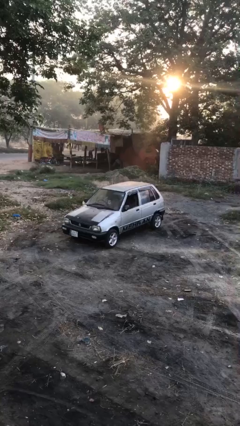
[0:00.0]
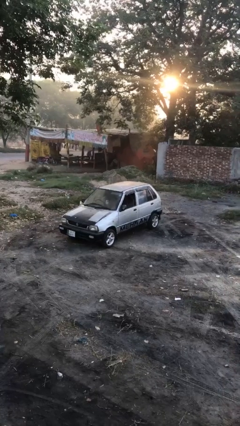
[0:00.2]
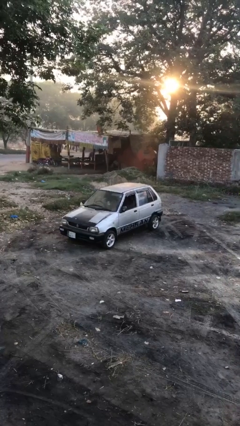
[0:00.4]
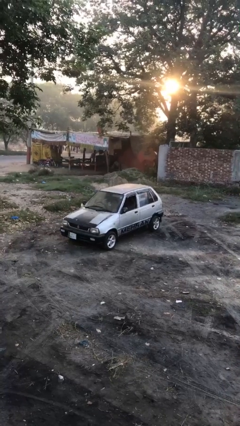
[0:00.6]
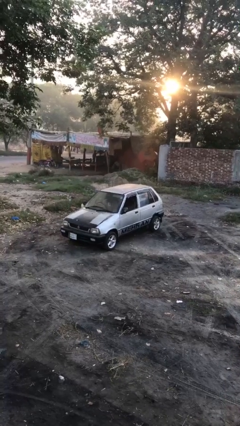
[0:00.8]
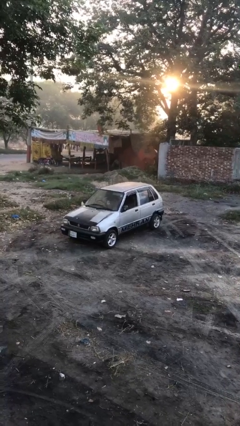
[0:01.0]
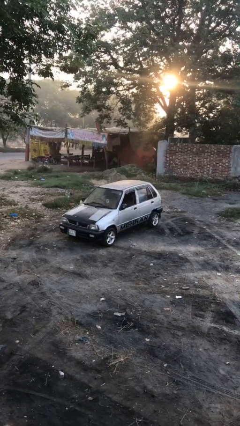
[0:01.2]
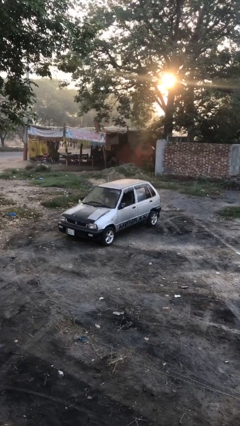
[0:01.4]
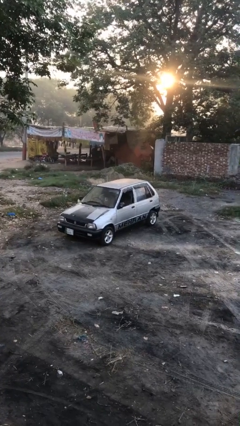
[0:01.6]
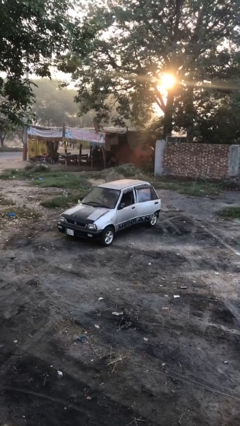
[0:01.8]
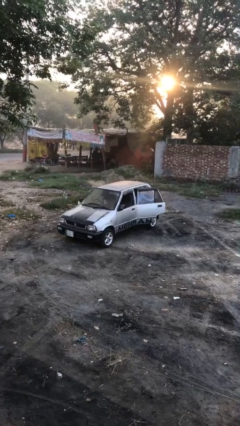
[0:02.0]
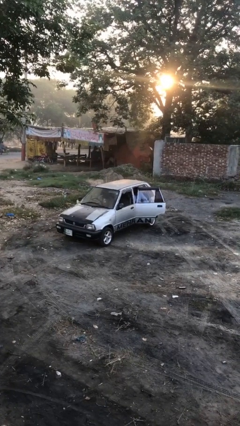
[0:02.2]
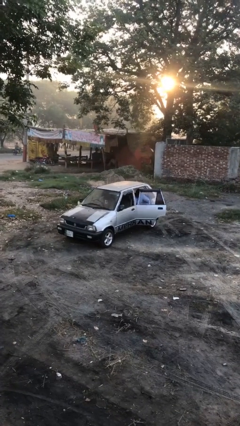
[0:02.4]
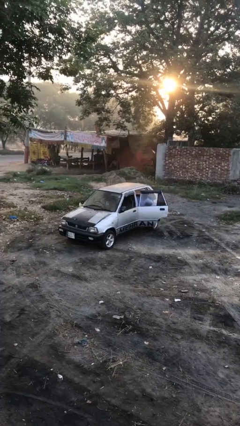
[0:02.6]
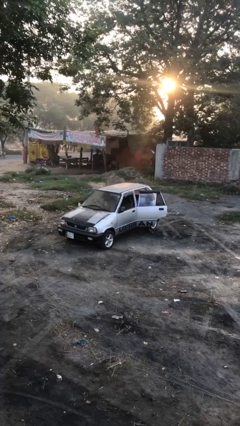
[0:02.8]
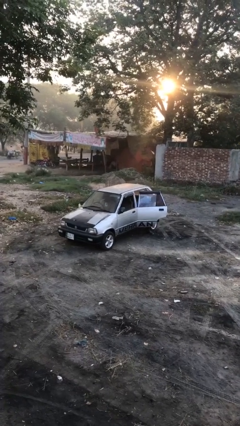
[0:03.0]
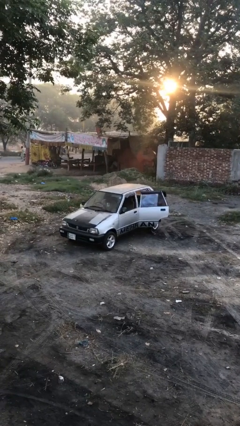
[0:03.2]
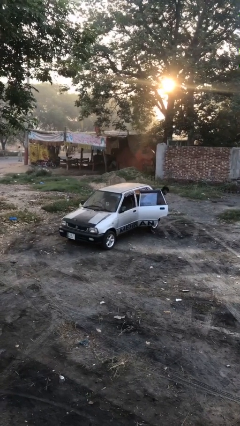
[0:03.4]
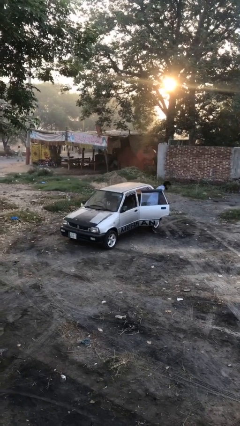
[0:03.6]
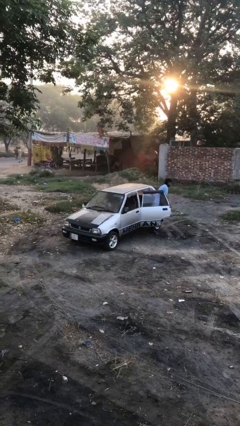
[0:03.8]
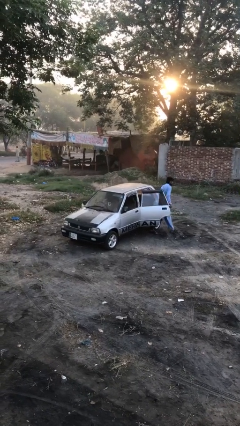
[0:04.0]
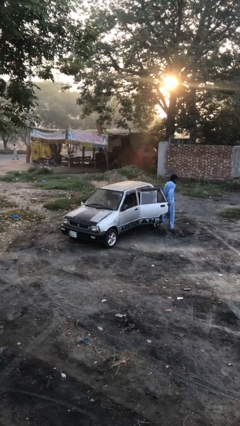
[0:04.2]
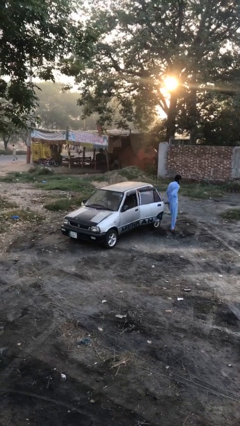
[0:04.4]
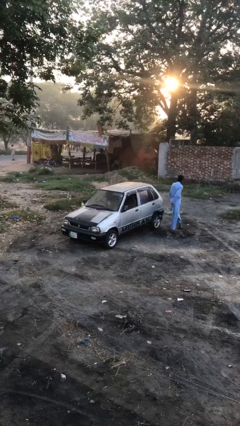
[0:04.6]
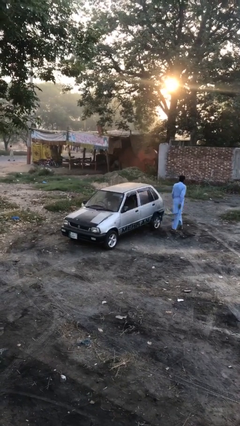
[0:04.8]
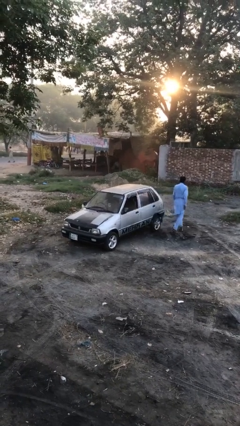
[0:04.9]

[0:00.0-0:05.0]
car drops off person

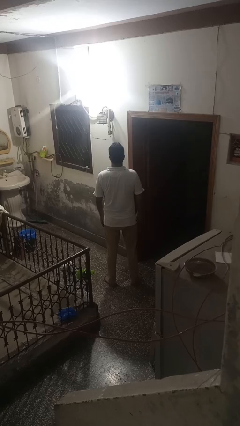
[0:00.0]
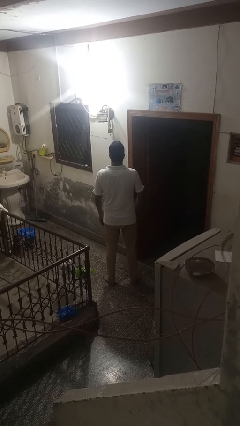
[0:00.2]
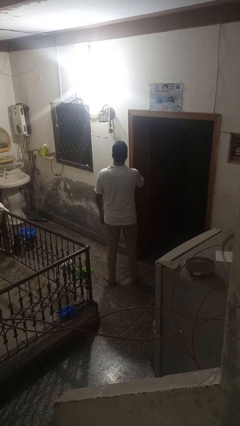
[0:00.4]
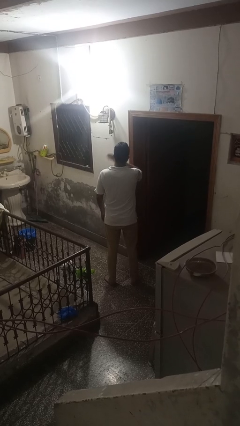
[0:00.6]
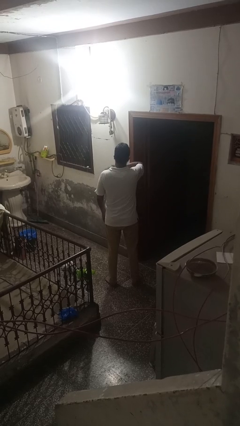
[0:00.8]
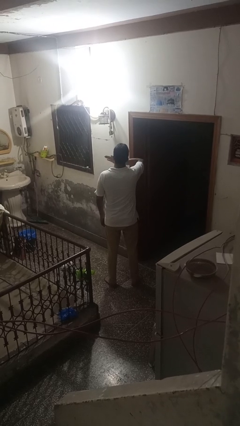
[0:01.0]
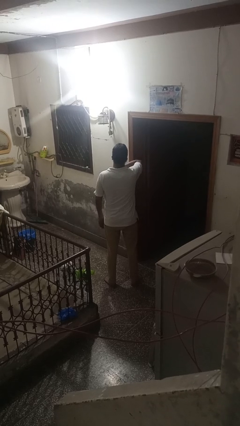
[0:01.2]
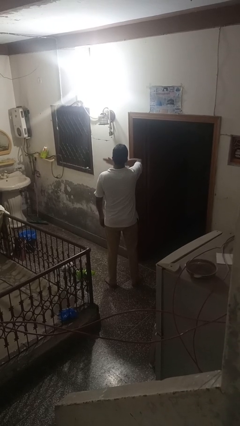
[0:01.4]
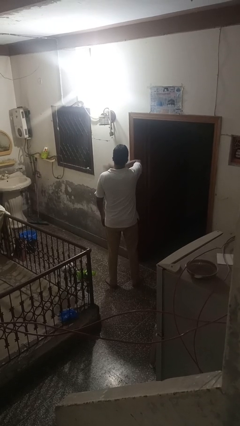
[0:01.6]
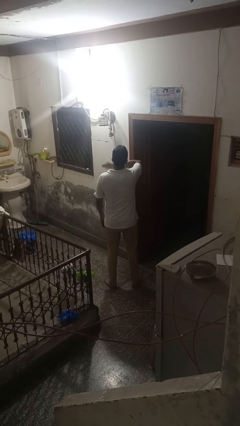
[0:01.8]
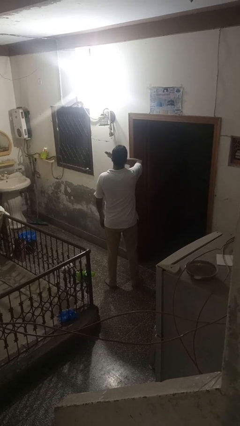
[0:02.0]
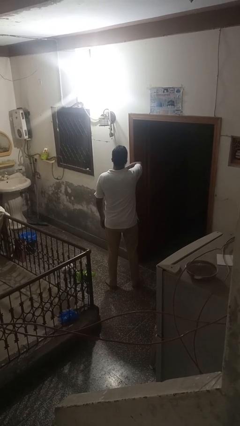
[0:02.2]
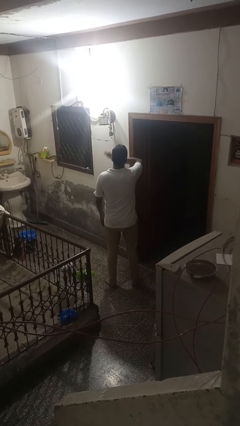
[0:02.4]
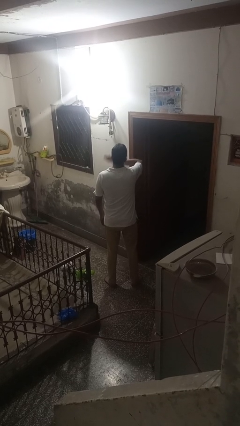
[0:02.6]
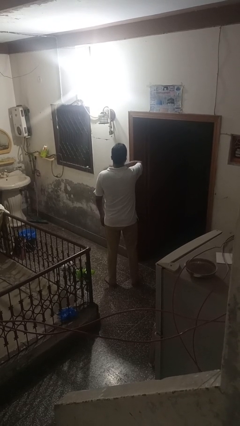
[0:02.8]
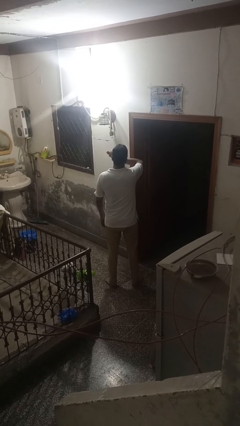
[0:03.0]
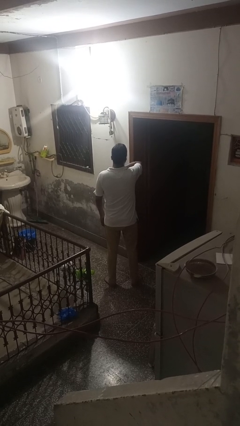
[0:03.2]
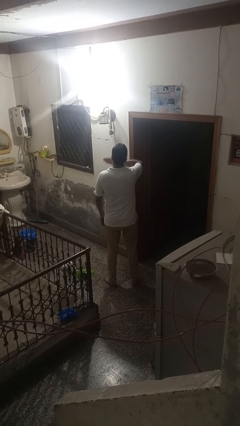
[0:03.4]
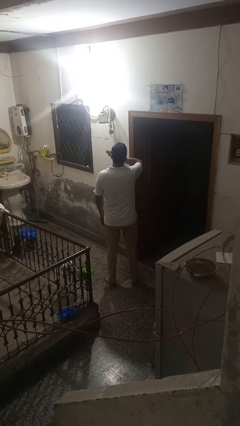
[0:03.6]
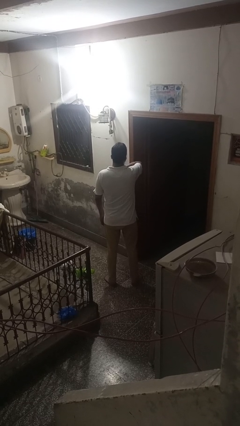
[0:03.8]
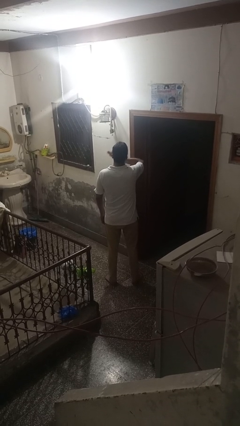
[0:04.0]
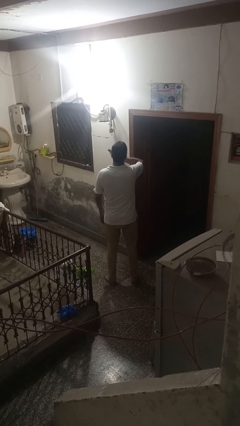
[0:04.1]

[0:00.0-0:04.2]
person drums on chest

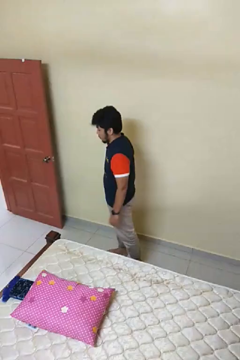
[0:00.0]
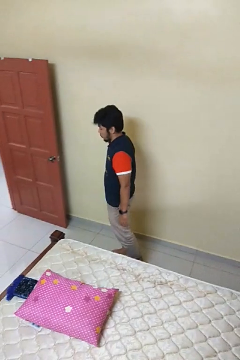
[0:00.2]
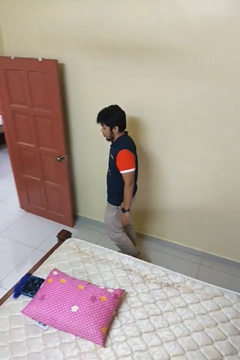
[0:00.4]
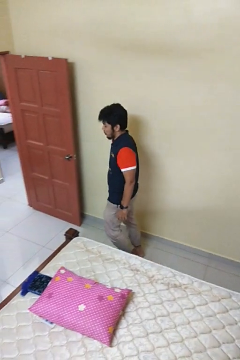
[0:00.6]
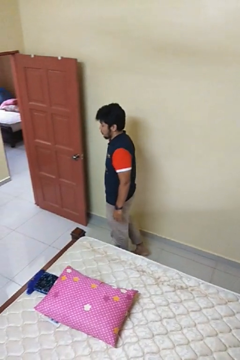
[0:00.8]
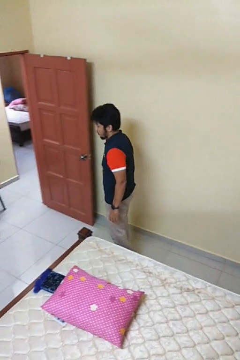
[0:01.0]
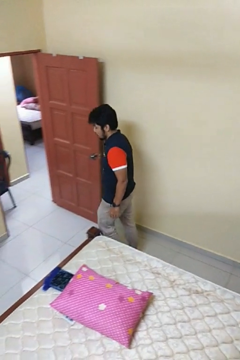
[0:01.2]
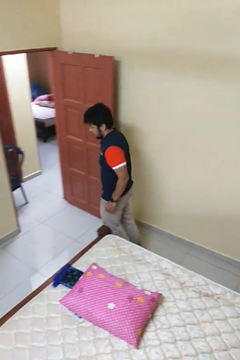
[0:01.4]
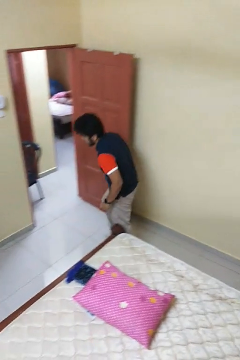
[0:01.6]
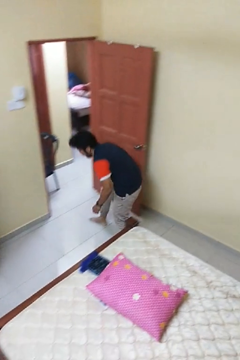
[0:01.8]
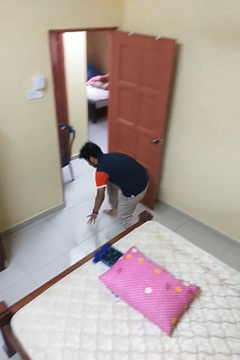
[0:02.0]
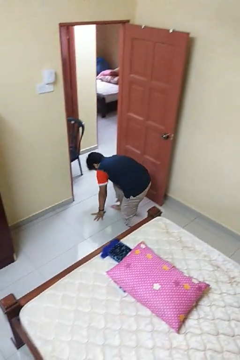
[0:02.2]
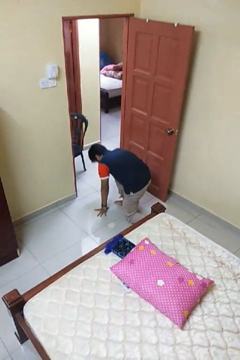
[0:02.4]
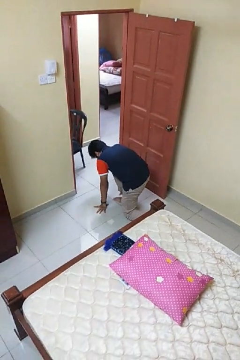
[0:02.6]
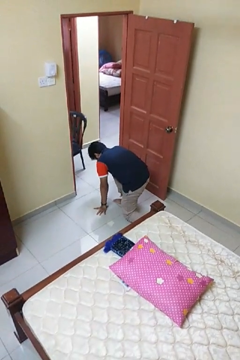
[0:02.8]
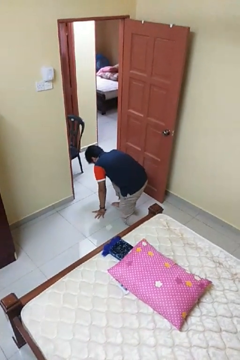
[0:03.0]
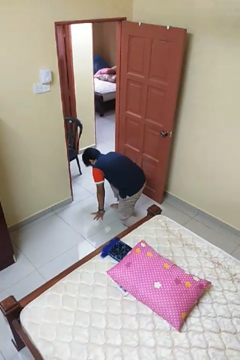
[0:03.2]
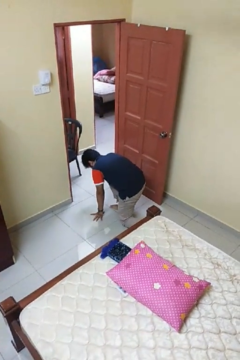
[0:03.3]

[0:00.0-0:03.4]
person trips on object on floor

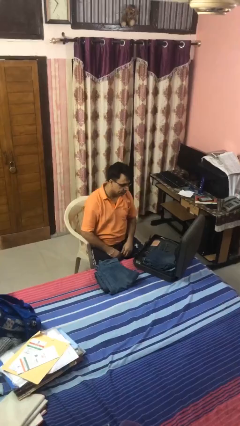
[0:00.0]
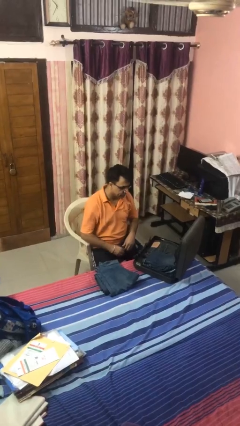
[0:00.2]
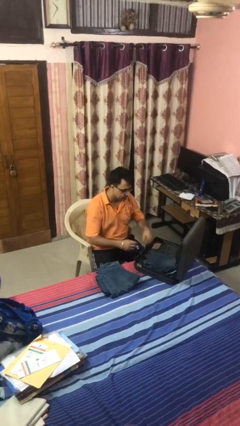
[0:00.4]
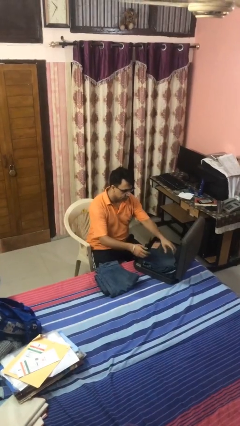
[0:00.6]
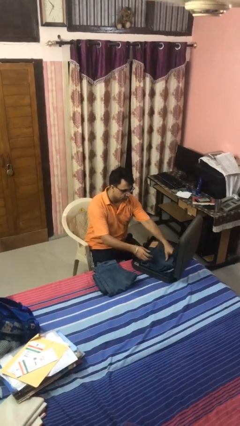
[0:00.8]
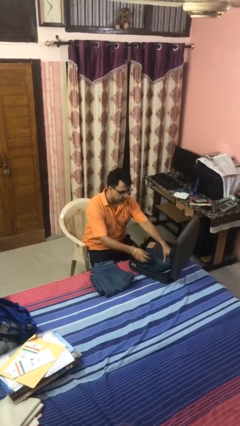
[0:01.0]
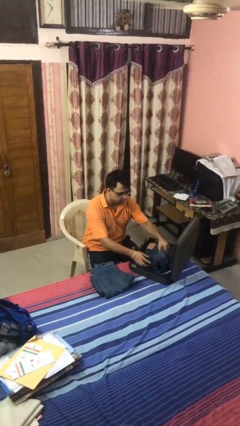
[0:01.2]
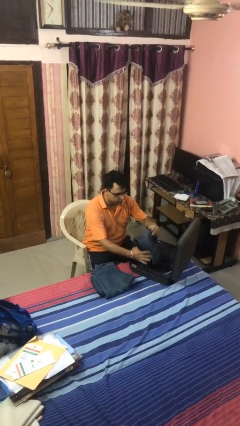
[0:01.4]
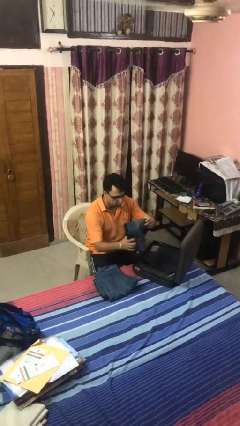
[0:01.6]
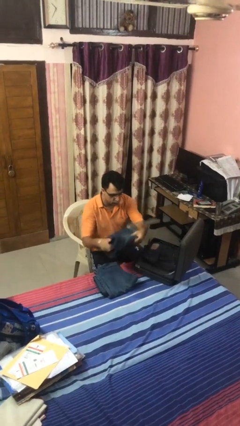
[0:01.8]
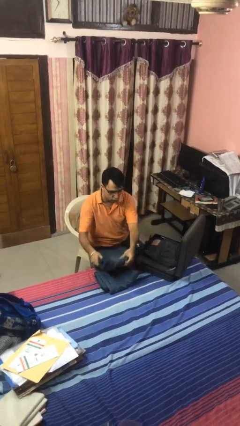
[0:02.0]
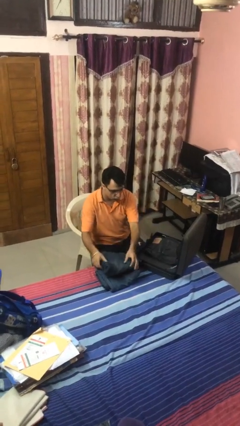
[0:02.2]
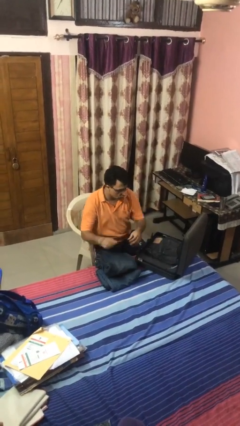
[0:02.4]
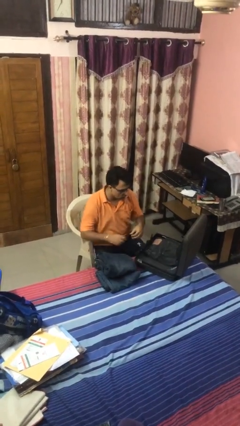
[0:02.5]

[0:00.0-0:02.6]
person unloads clothes from suitcase

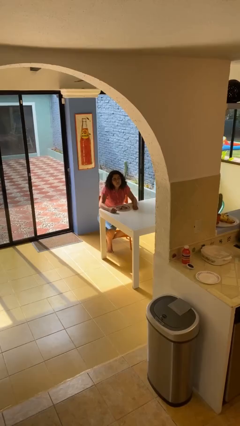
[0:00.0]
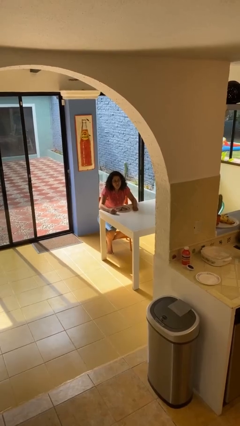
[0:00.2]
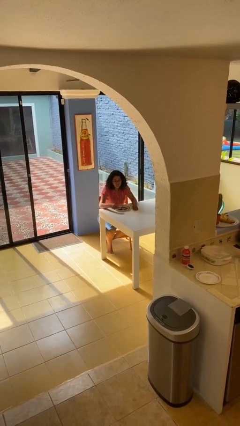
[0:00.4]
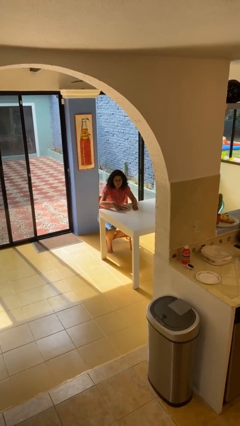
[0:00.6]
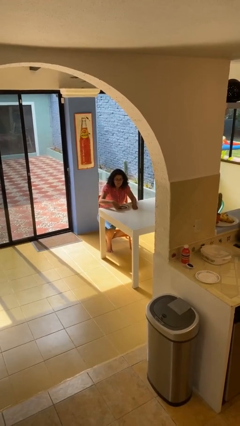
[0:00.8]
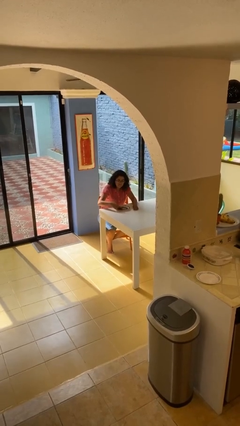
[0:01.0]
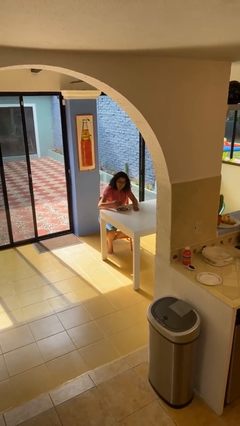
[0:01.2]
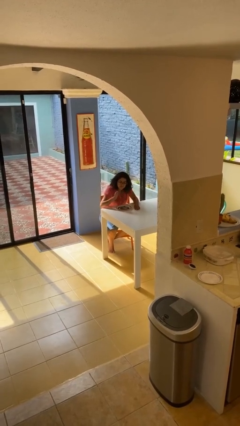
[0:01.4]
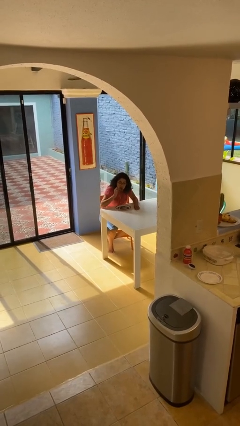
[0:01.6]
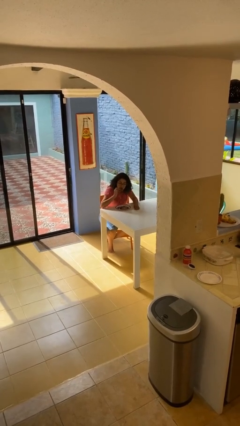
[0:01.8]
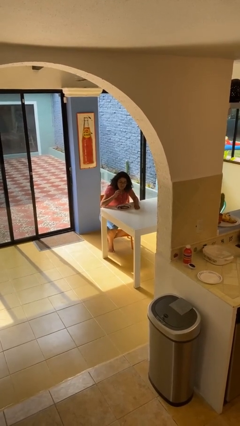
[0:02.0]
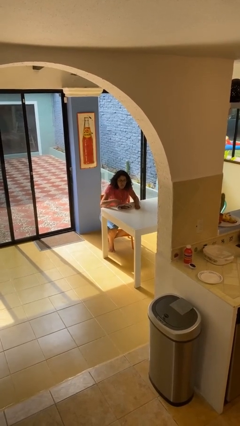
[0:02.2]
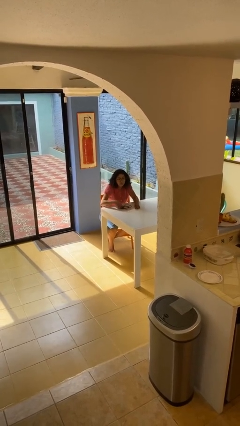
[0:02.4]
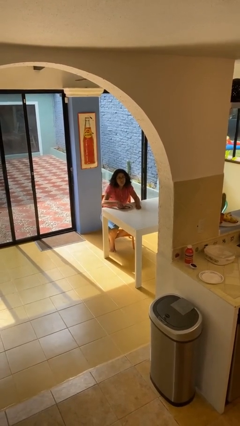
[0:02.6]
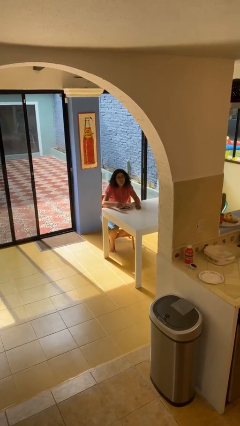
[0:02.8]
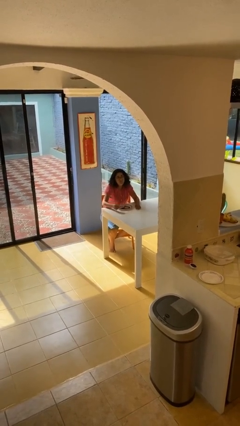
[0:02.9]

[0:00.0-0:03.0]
person eats with hands

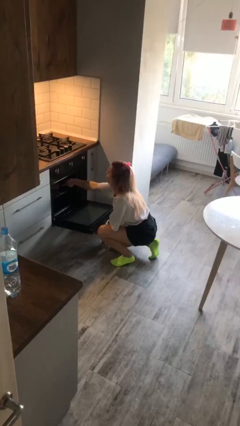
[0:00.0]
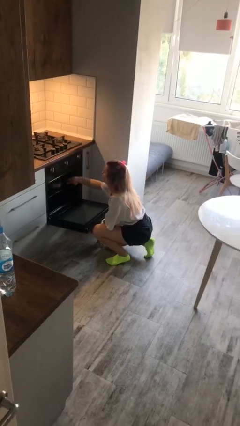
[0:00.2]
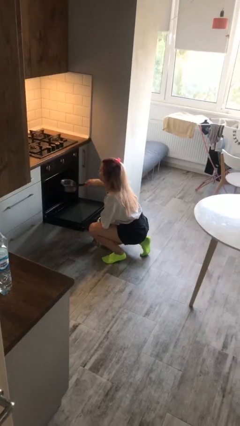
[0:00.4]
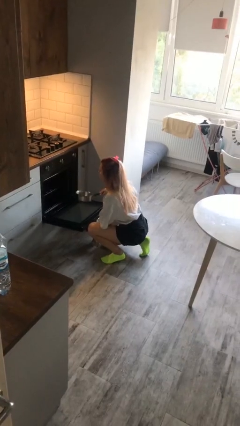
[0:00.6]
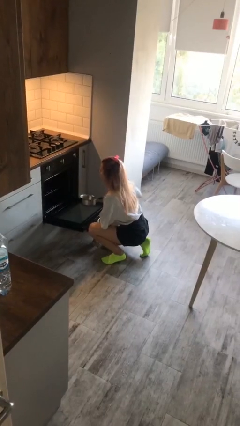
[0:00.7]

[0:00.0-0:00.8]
person takes object from oven
